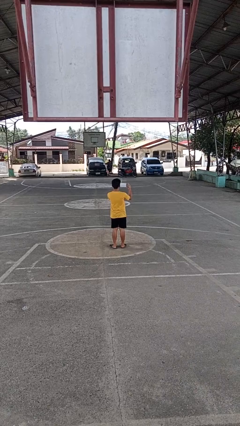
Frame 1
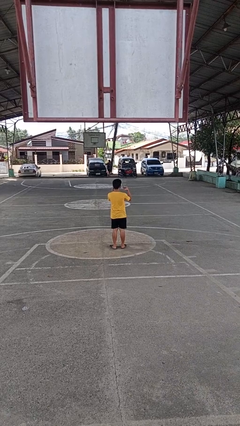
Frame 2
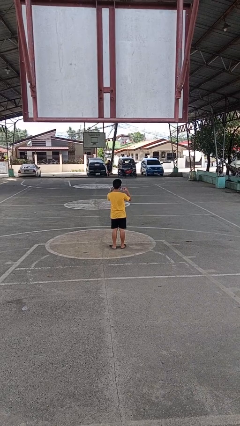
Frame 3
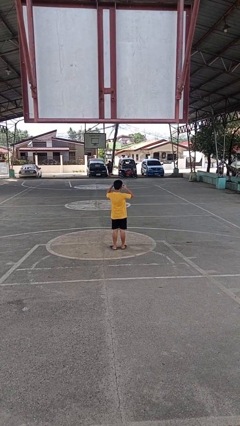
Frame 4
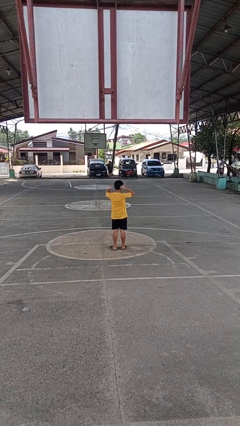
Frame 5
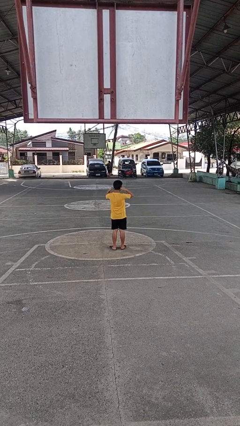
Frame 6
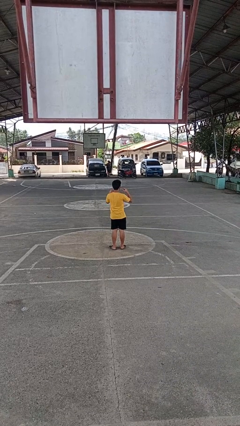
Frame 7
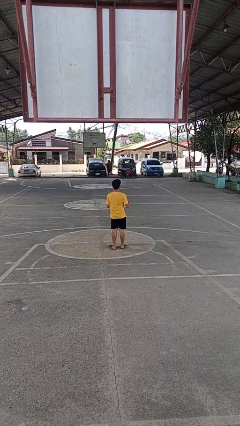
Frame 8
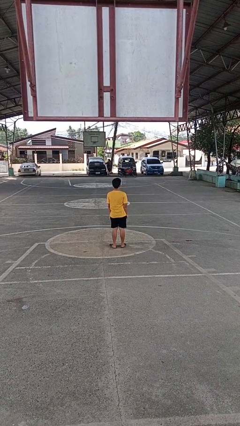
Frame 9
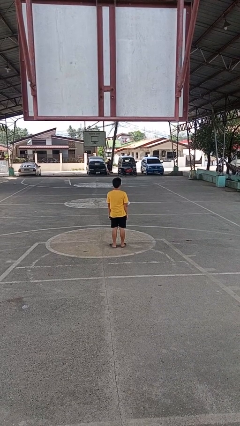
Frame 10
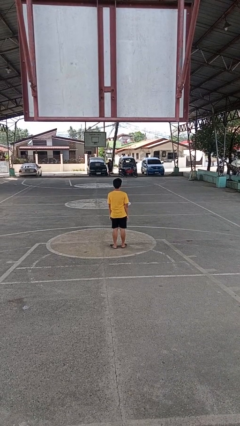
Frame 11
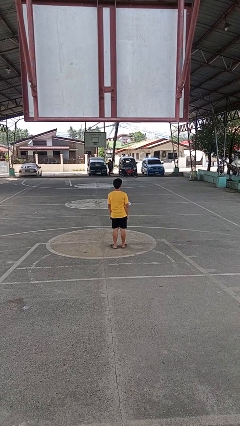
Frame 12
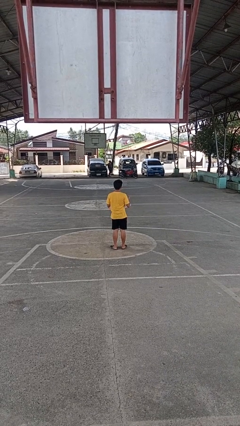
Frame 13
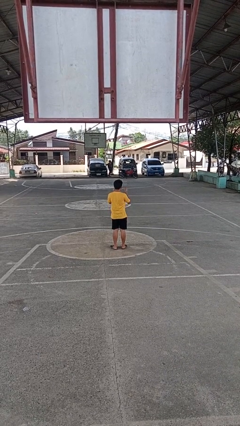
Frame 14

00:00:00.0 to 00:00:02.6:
person puts on facemask

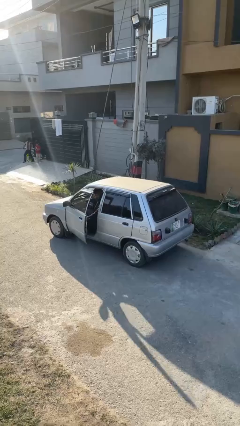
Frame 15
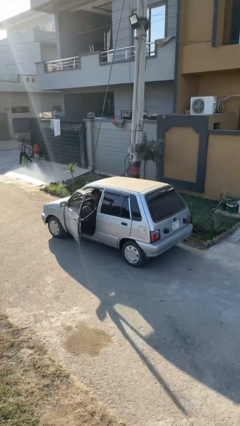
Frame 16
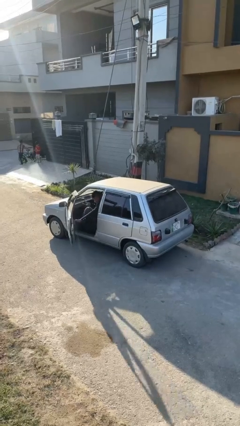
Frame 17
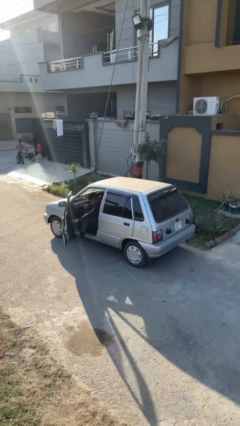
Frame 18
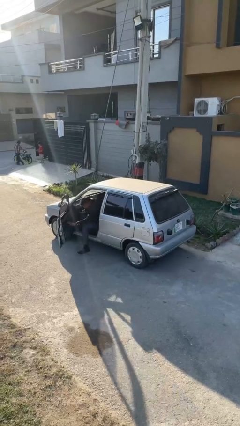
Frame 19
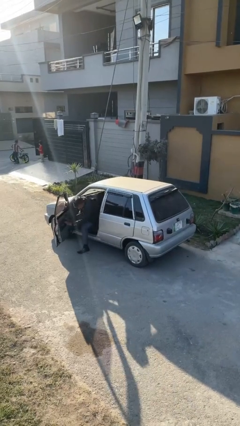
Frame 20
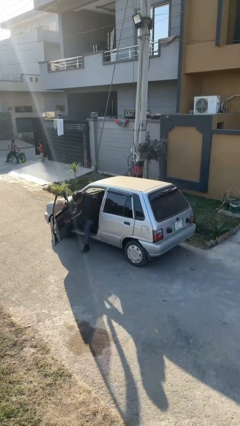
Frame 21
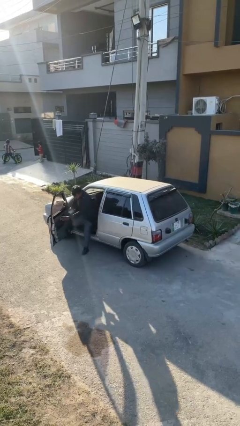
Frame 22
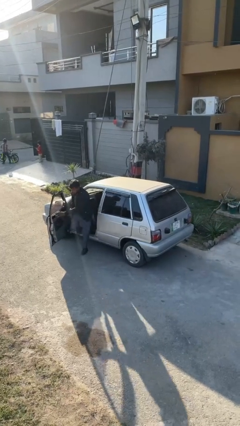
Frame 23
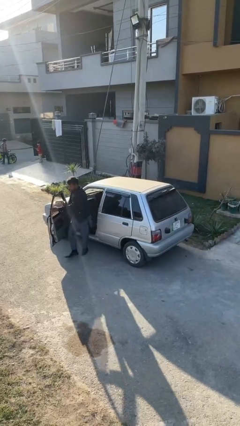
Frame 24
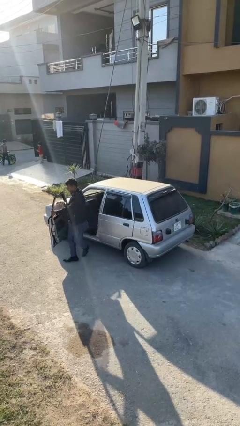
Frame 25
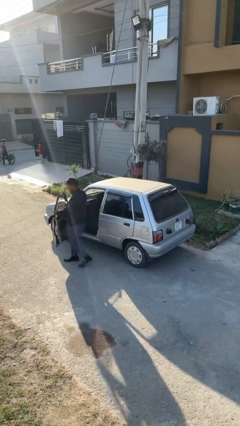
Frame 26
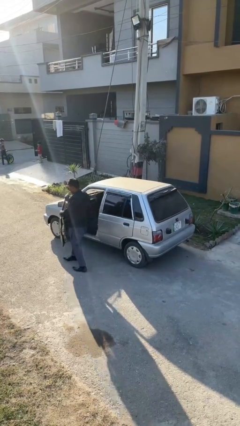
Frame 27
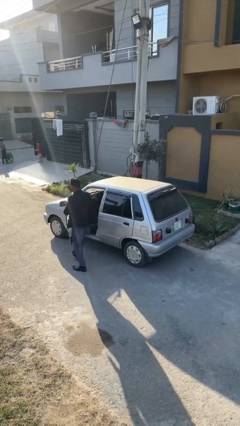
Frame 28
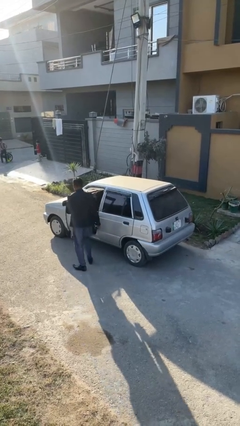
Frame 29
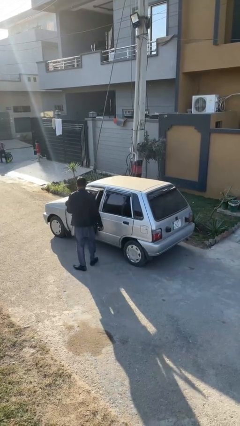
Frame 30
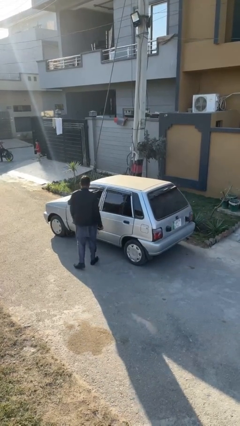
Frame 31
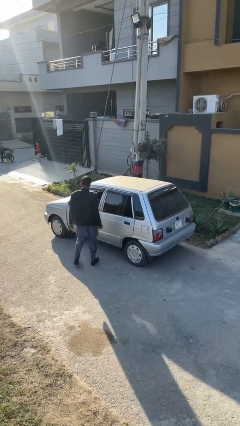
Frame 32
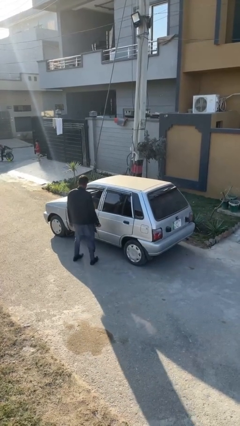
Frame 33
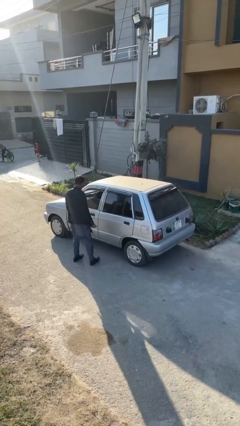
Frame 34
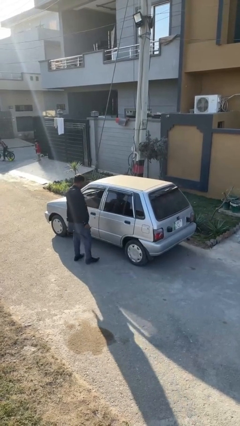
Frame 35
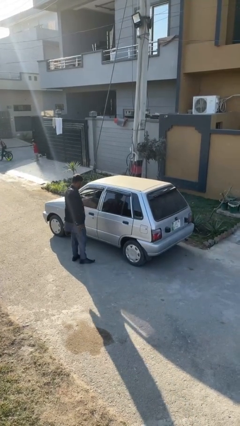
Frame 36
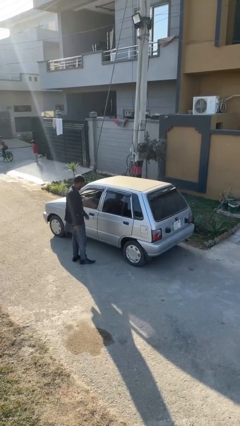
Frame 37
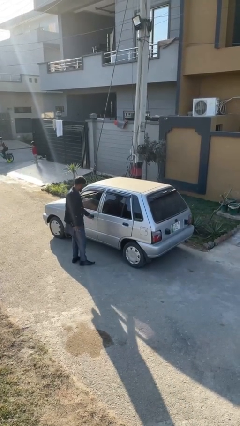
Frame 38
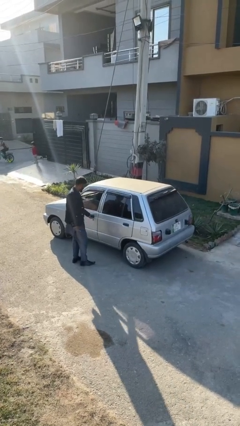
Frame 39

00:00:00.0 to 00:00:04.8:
car drops off person

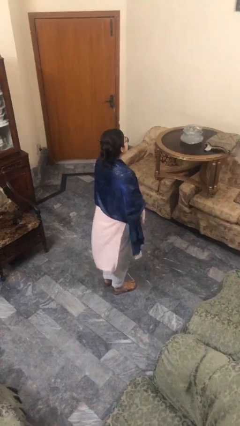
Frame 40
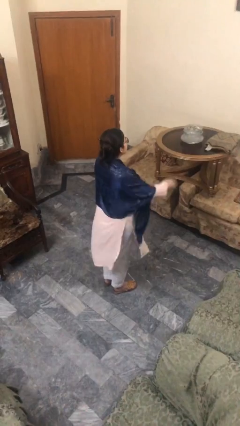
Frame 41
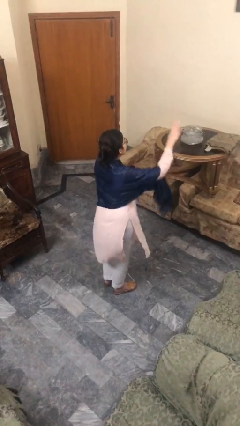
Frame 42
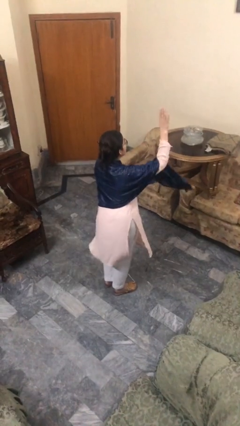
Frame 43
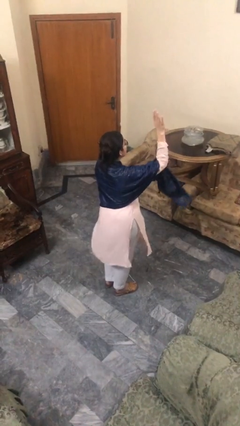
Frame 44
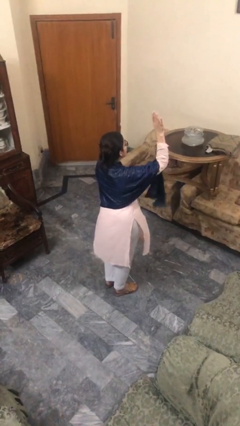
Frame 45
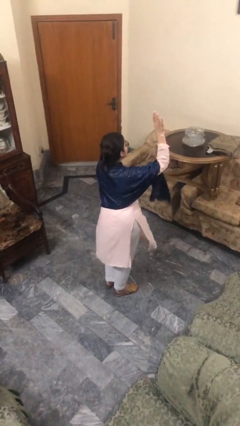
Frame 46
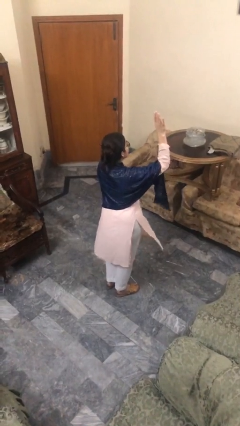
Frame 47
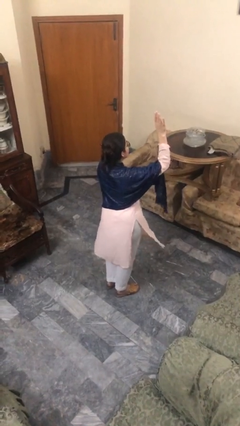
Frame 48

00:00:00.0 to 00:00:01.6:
person gestures raise hand

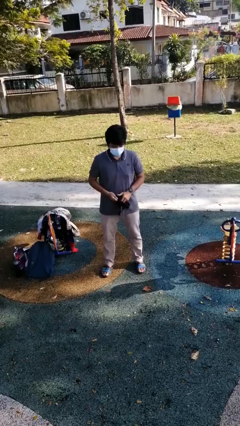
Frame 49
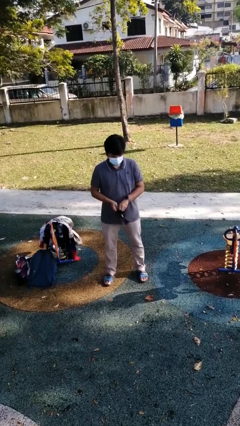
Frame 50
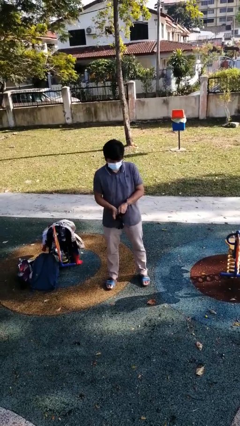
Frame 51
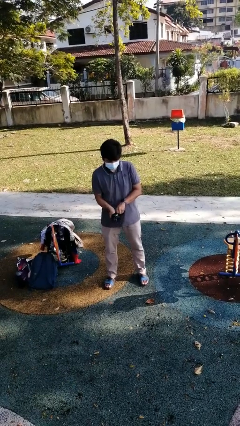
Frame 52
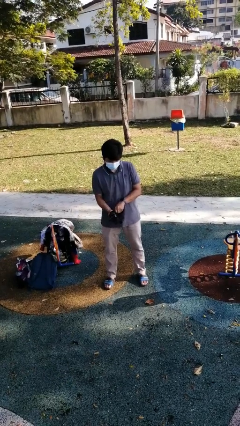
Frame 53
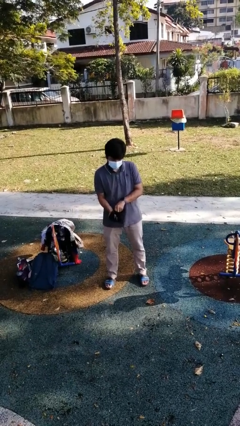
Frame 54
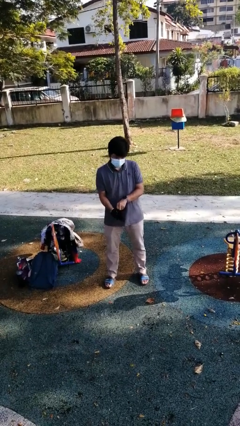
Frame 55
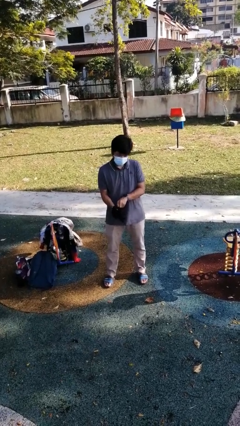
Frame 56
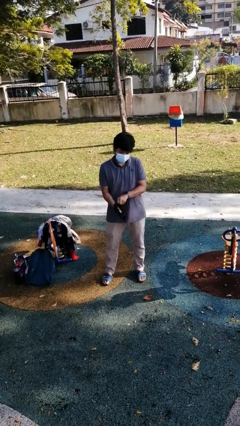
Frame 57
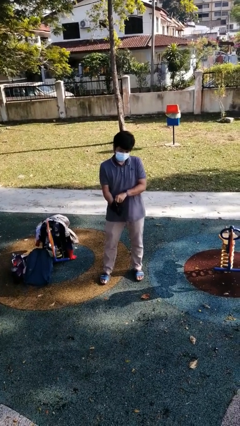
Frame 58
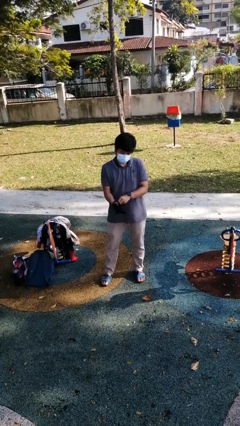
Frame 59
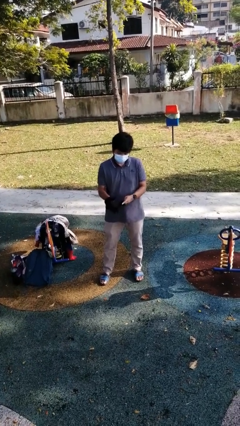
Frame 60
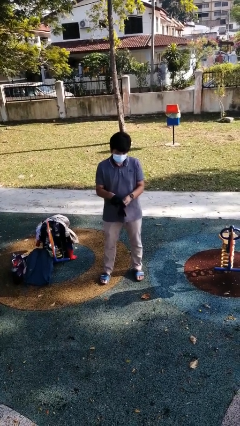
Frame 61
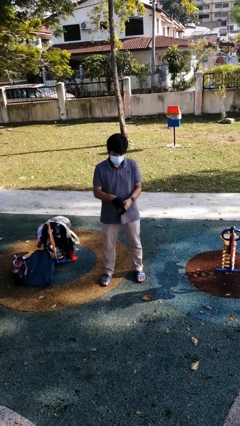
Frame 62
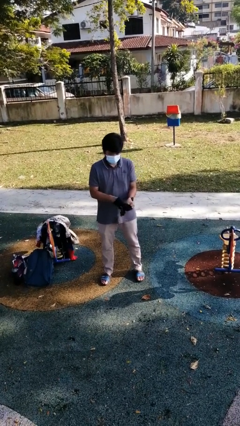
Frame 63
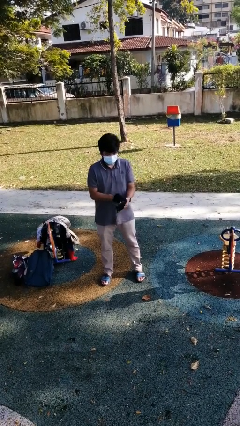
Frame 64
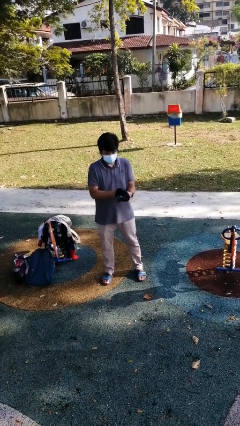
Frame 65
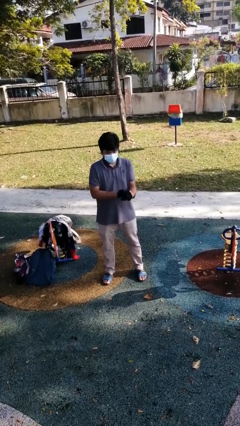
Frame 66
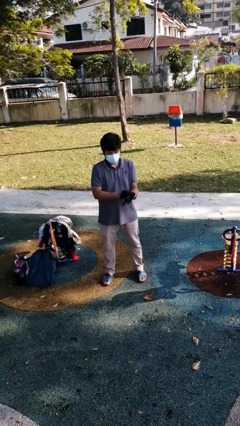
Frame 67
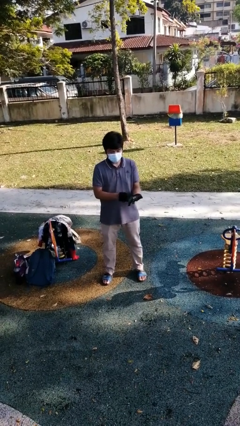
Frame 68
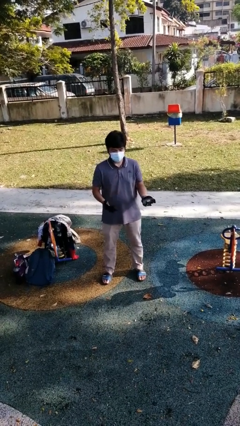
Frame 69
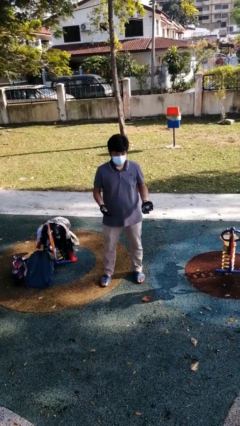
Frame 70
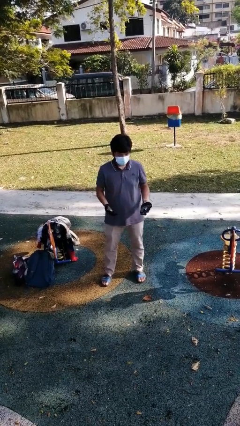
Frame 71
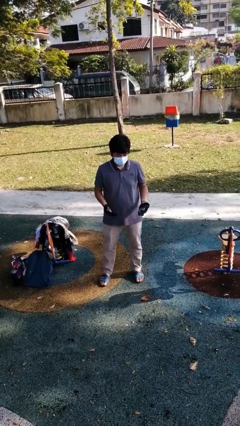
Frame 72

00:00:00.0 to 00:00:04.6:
person puts on gloves

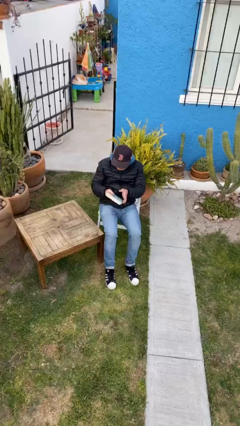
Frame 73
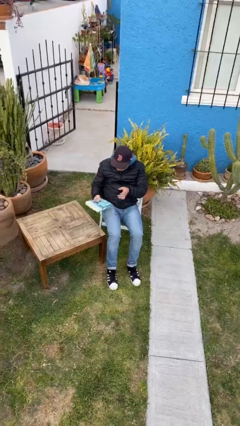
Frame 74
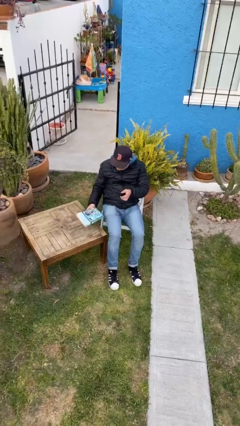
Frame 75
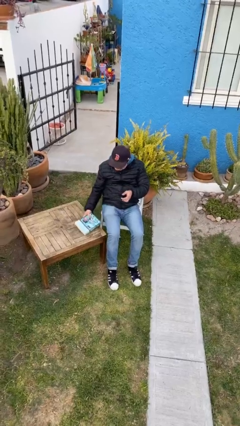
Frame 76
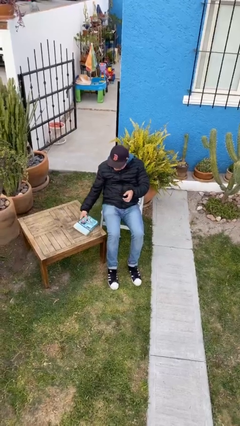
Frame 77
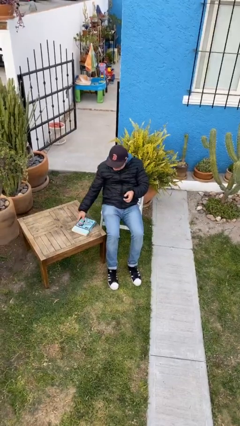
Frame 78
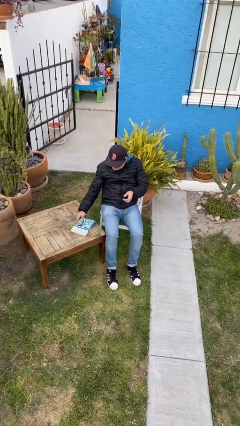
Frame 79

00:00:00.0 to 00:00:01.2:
person puts down object on table

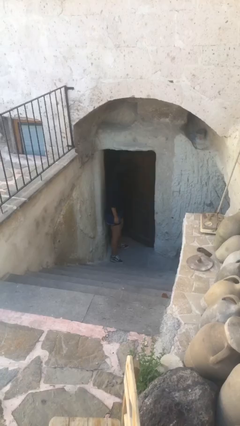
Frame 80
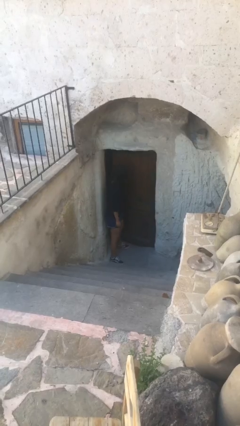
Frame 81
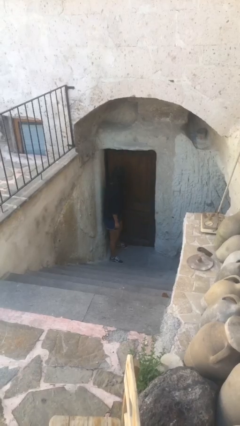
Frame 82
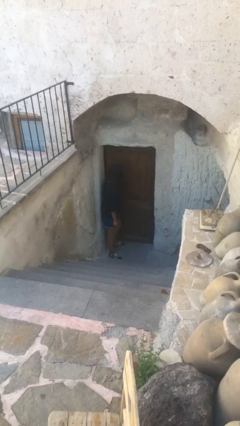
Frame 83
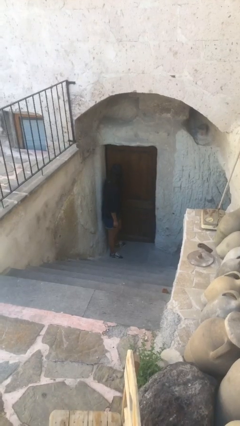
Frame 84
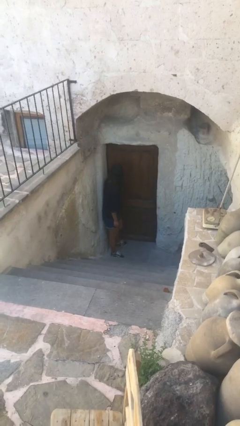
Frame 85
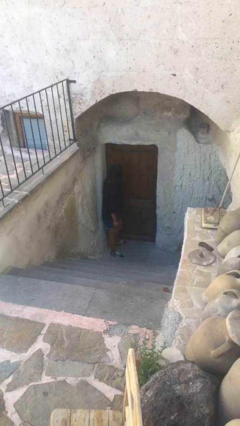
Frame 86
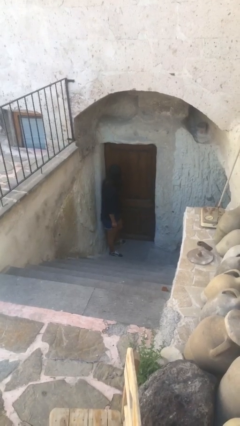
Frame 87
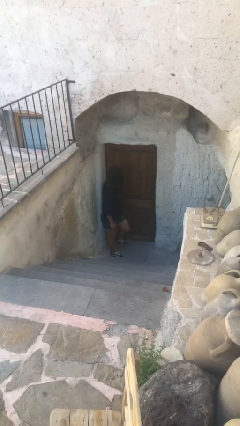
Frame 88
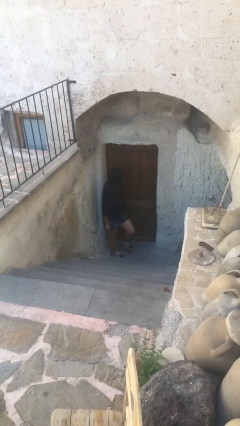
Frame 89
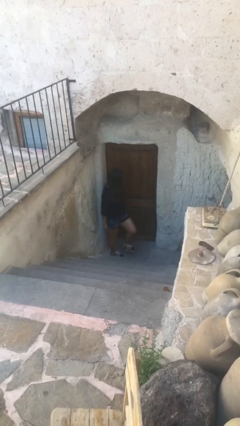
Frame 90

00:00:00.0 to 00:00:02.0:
person closes facility door

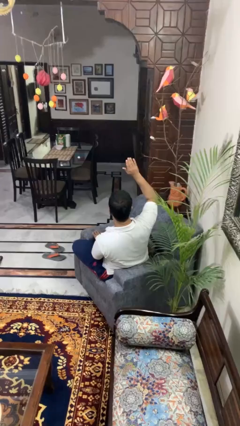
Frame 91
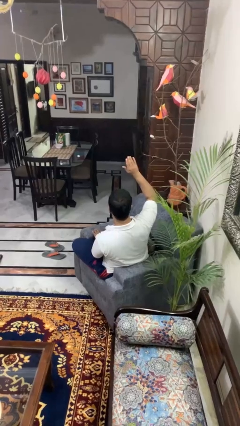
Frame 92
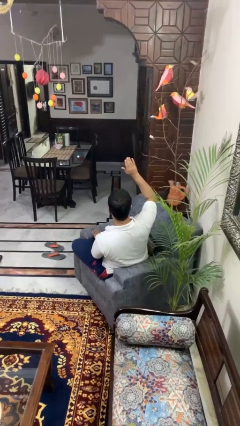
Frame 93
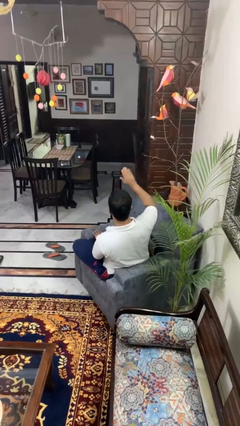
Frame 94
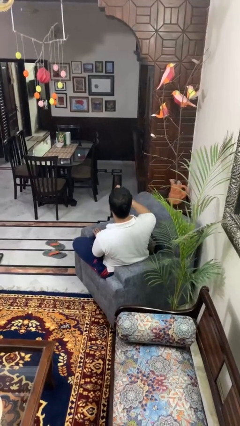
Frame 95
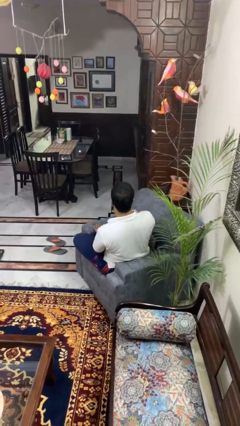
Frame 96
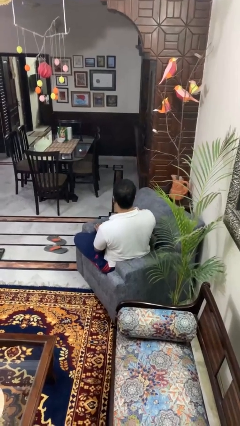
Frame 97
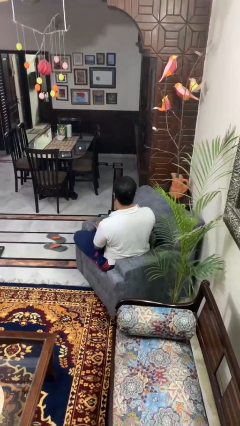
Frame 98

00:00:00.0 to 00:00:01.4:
person gestures lower hand
